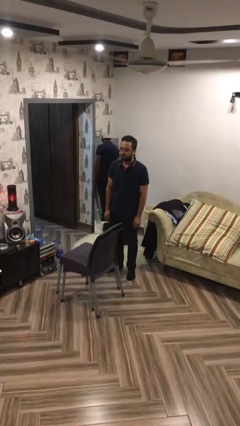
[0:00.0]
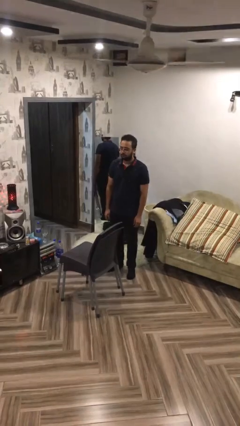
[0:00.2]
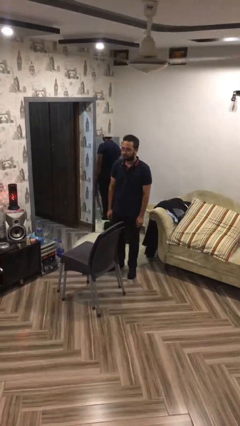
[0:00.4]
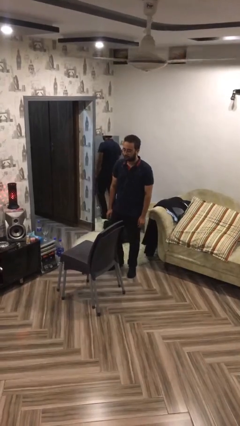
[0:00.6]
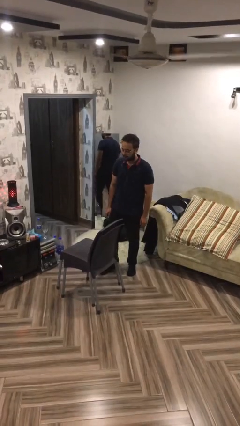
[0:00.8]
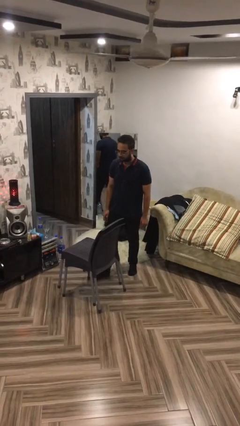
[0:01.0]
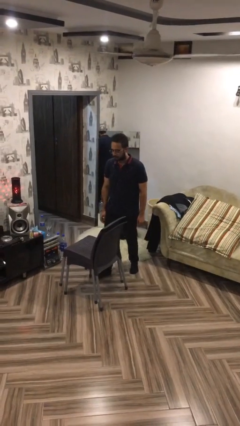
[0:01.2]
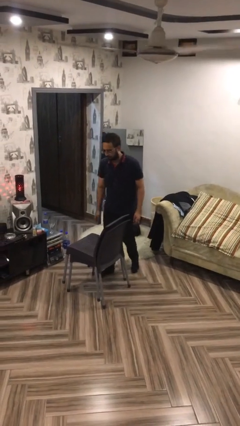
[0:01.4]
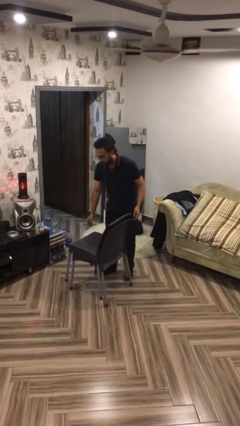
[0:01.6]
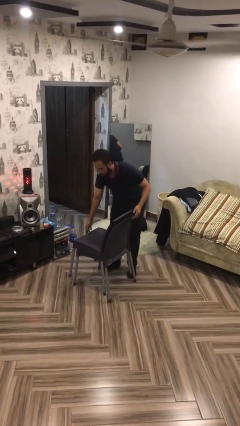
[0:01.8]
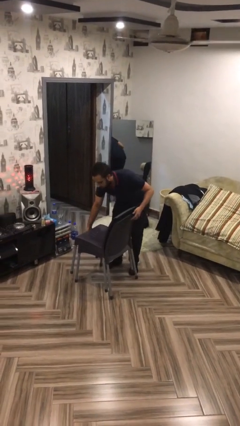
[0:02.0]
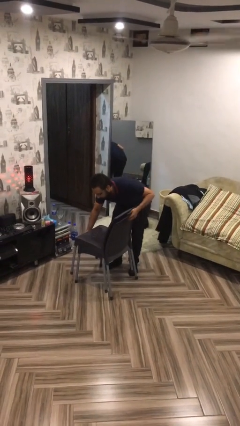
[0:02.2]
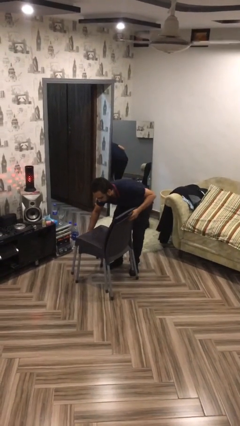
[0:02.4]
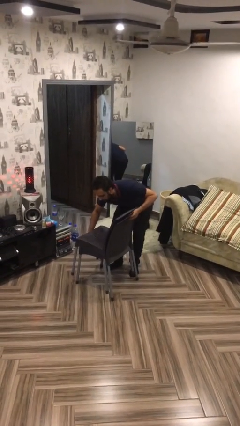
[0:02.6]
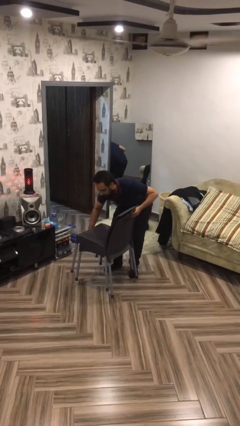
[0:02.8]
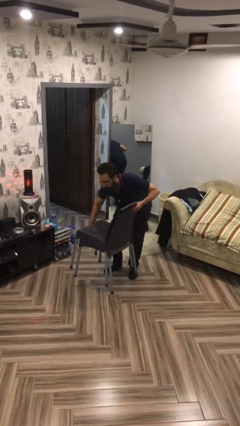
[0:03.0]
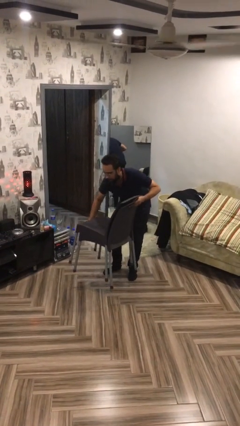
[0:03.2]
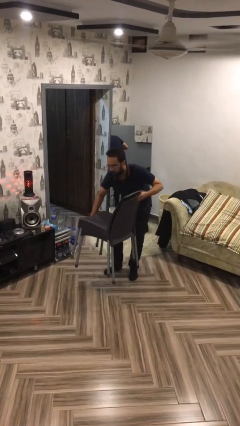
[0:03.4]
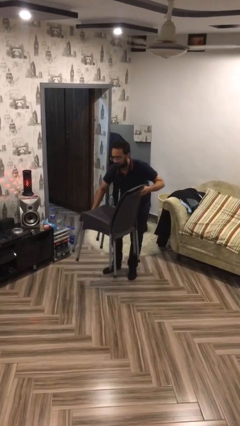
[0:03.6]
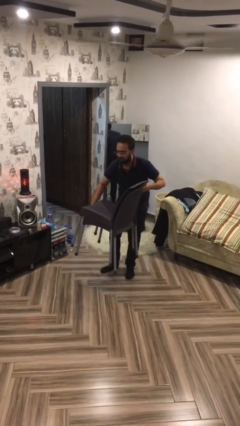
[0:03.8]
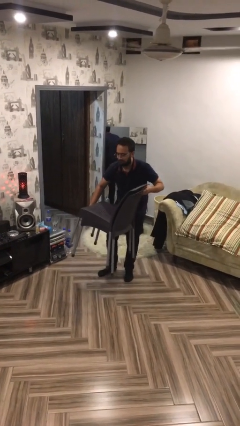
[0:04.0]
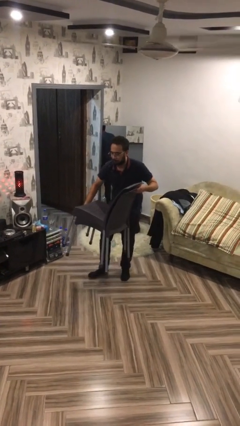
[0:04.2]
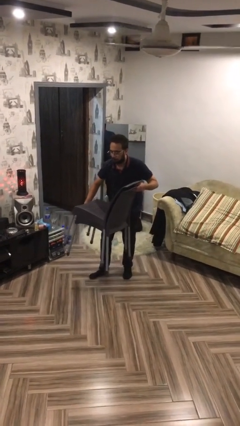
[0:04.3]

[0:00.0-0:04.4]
person picks up object from floor

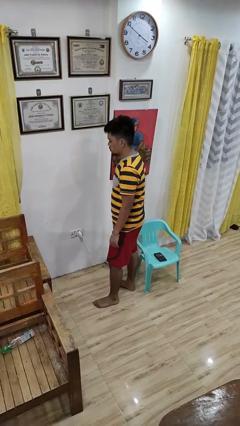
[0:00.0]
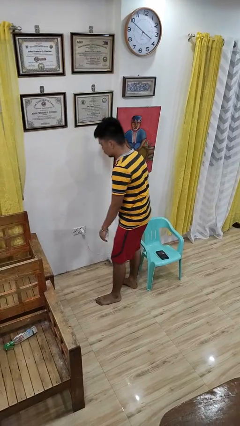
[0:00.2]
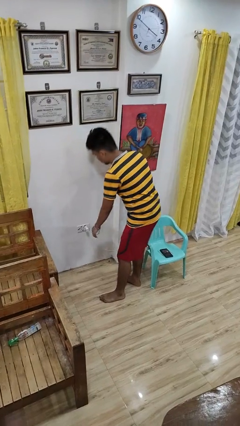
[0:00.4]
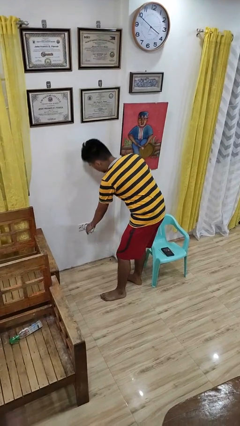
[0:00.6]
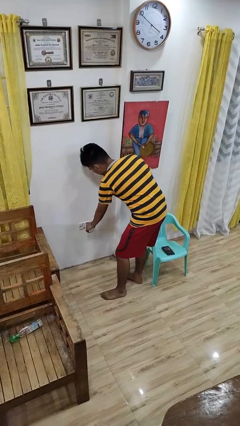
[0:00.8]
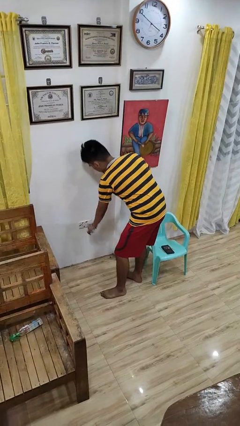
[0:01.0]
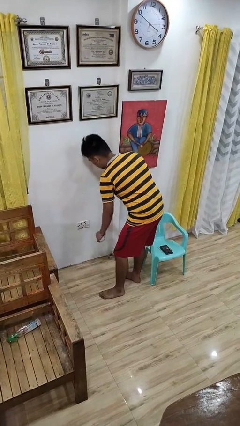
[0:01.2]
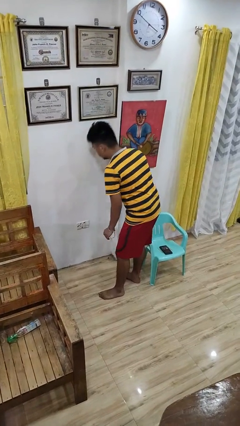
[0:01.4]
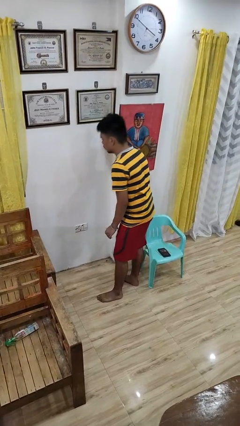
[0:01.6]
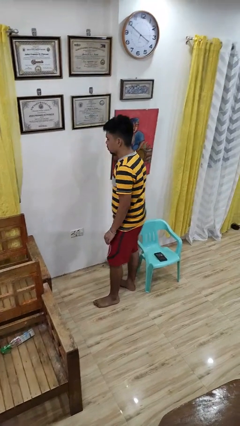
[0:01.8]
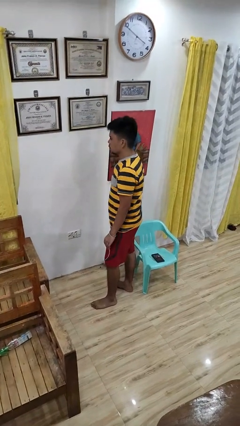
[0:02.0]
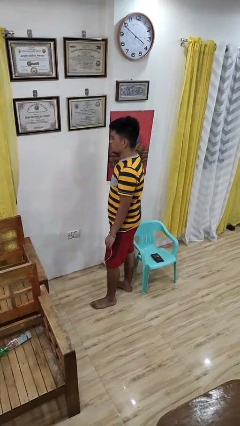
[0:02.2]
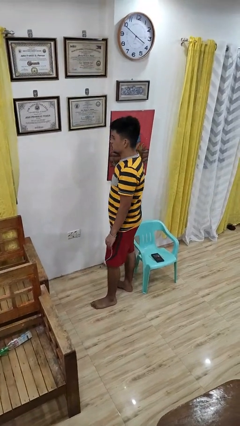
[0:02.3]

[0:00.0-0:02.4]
person unplugs from electrical socket

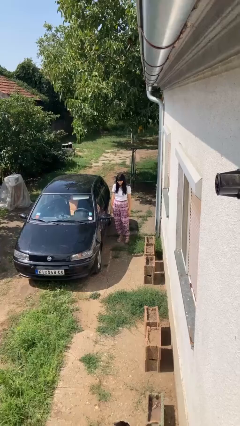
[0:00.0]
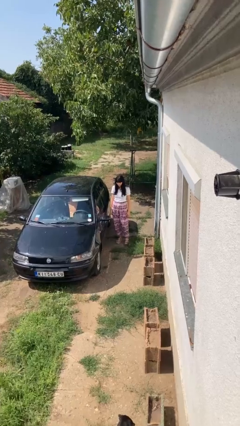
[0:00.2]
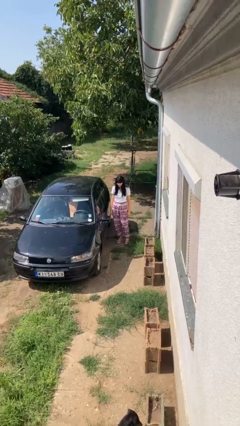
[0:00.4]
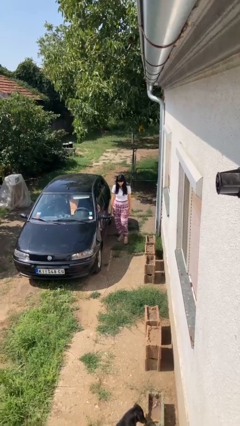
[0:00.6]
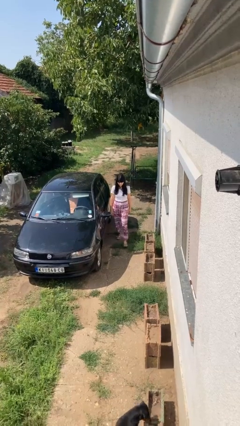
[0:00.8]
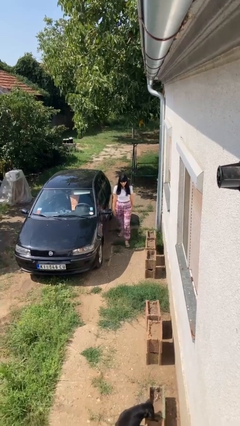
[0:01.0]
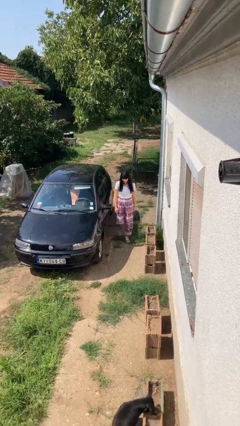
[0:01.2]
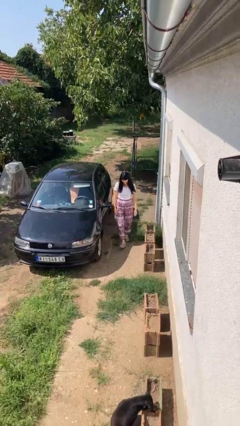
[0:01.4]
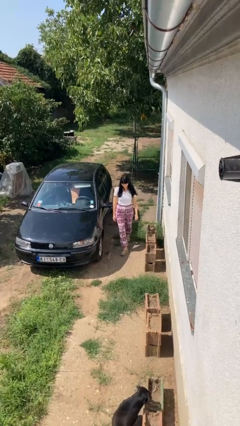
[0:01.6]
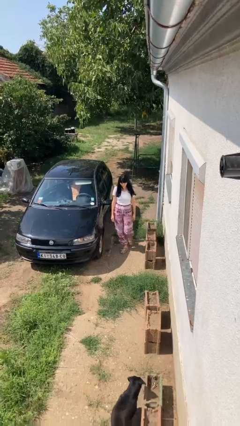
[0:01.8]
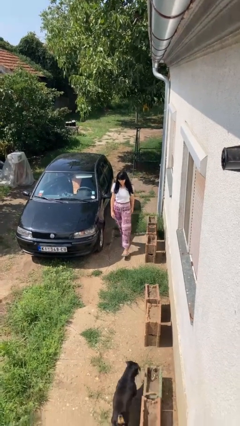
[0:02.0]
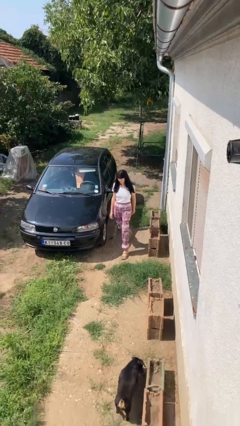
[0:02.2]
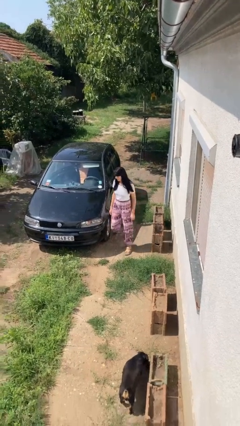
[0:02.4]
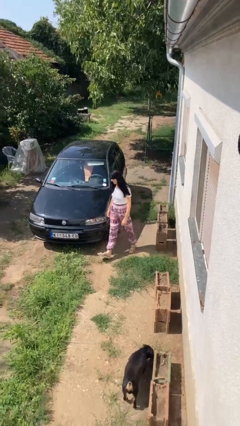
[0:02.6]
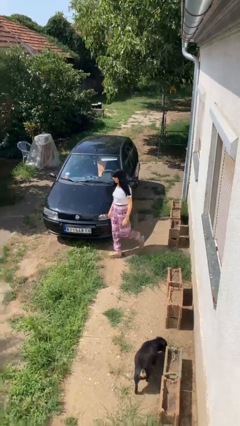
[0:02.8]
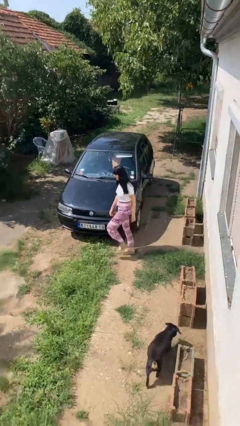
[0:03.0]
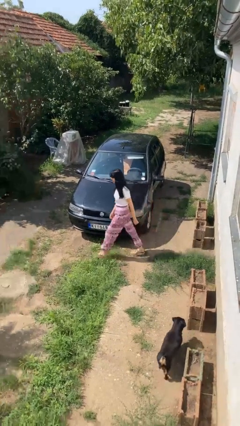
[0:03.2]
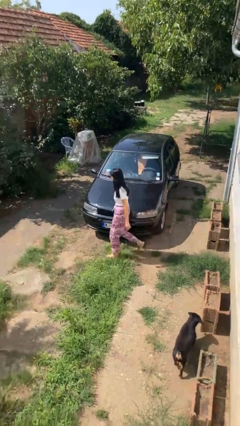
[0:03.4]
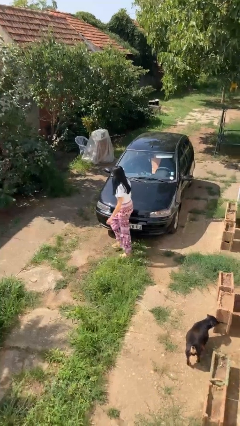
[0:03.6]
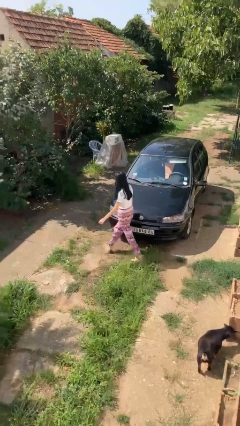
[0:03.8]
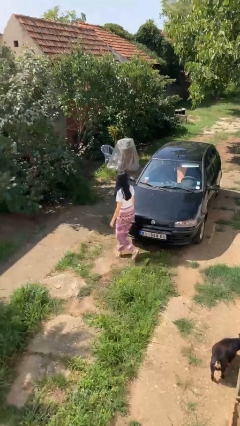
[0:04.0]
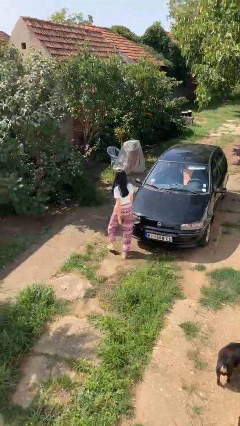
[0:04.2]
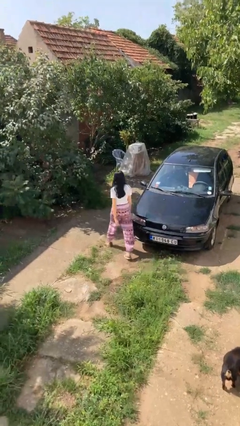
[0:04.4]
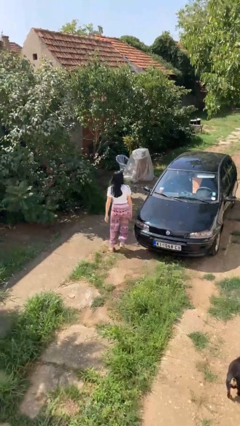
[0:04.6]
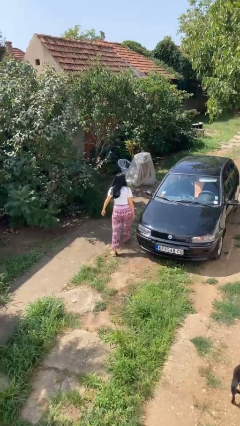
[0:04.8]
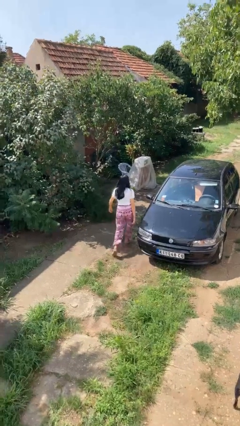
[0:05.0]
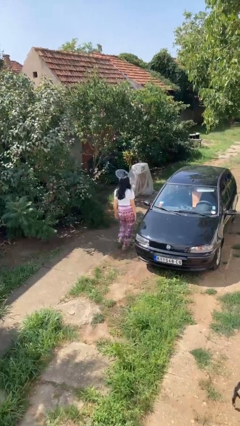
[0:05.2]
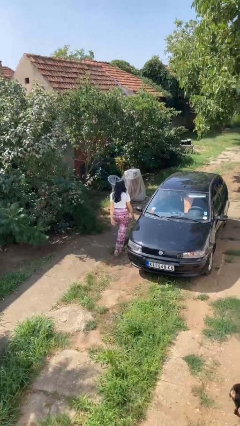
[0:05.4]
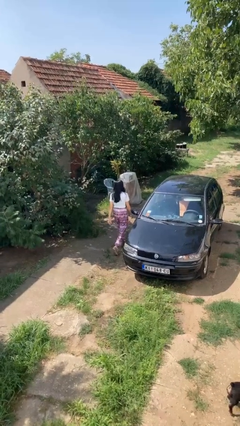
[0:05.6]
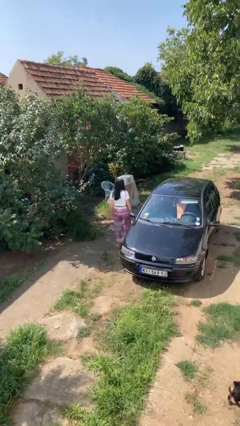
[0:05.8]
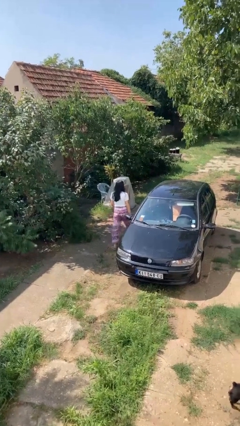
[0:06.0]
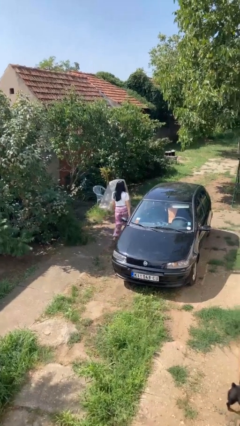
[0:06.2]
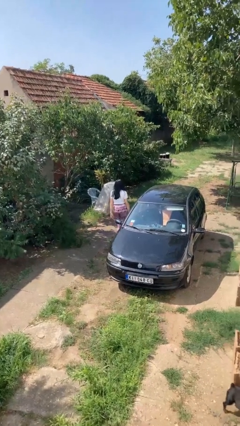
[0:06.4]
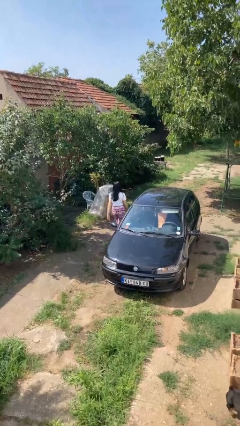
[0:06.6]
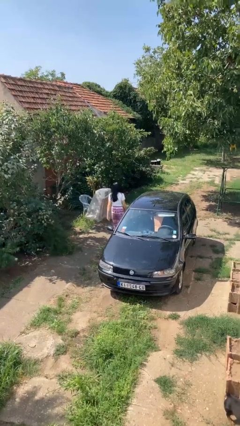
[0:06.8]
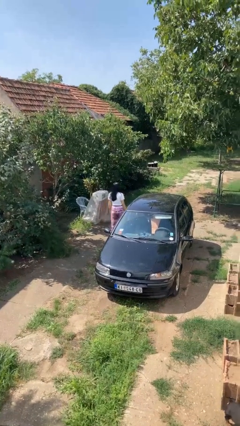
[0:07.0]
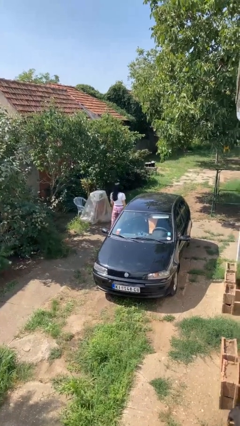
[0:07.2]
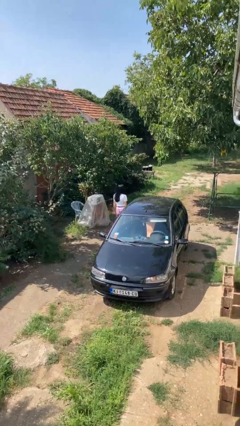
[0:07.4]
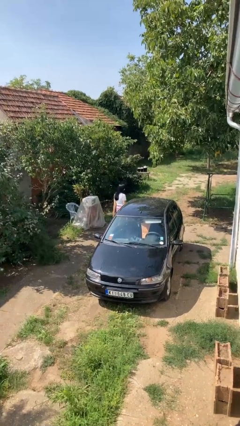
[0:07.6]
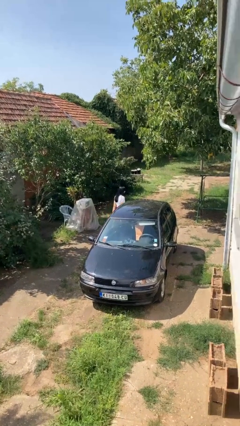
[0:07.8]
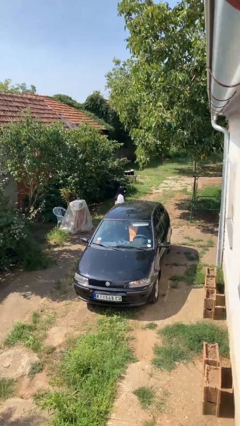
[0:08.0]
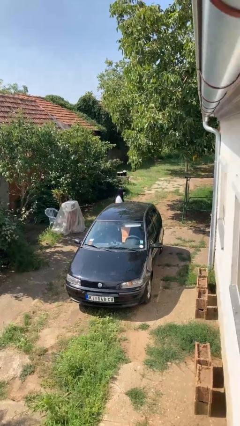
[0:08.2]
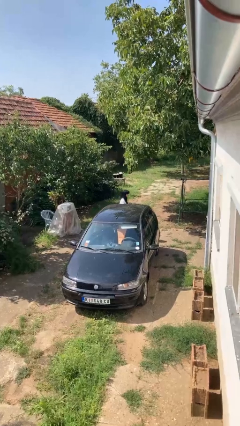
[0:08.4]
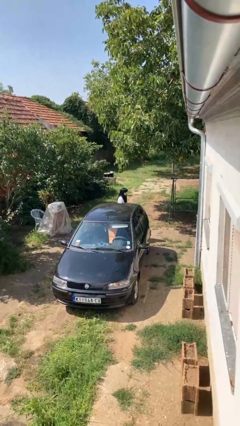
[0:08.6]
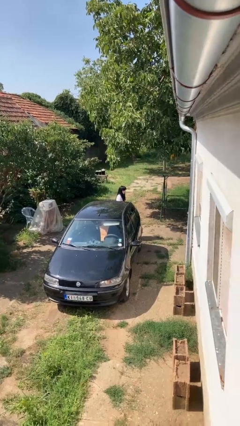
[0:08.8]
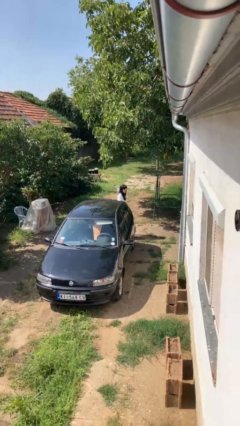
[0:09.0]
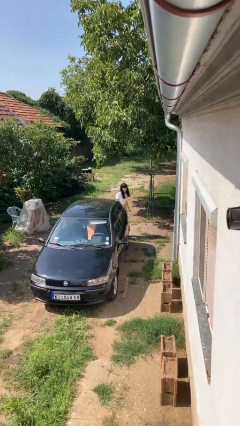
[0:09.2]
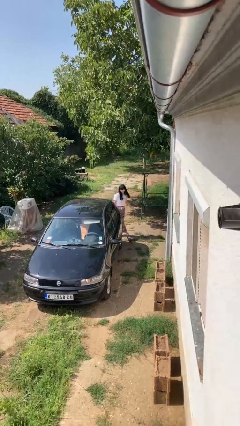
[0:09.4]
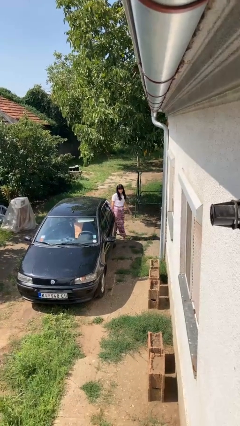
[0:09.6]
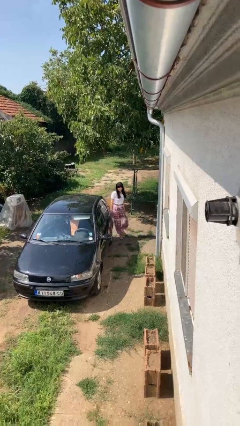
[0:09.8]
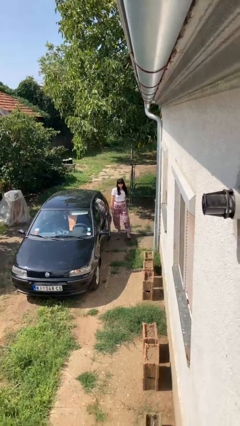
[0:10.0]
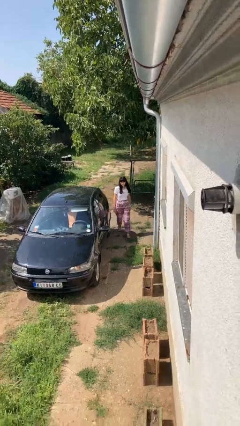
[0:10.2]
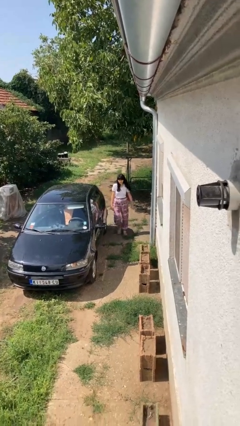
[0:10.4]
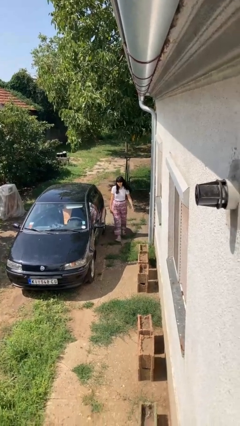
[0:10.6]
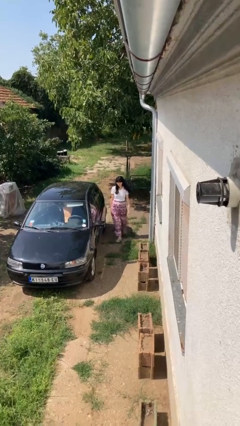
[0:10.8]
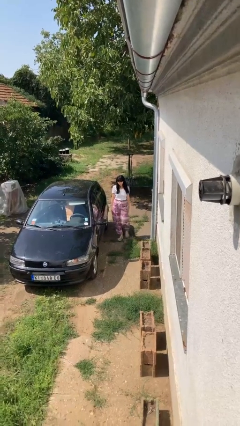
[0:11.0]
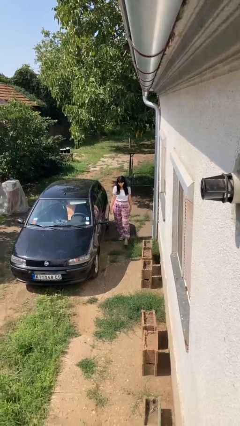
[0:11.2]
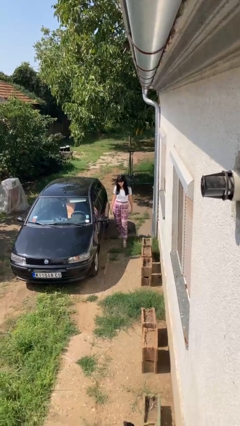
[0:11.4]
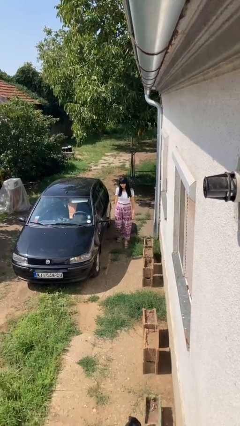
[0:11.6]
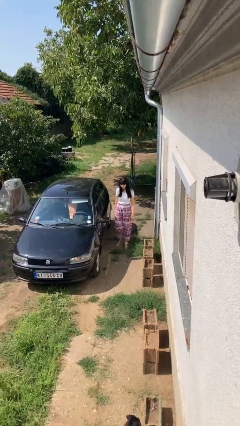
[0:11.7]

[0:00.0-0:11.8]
person walks around car
